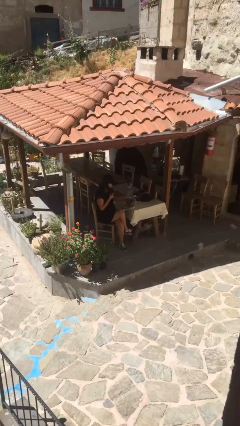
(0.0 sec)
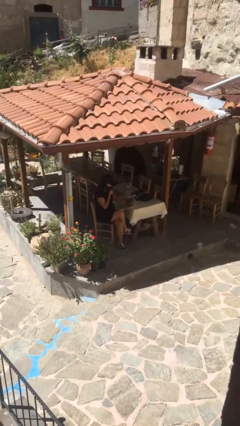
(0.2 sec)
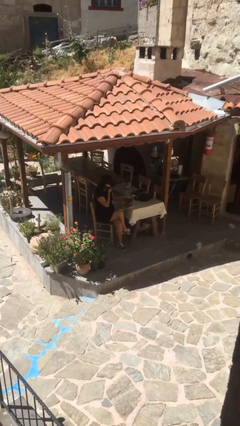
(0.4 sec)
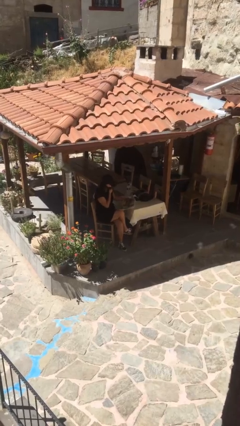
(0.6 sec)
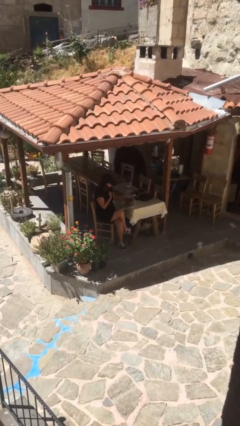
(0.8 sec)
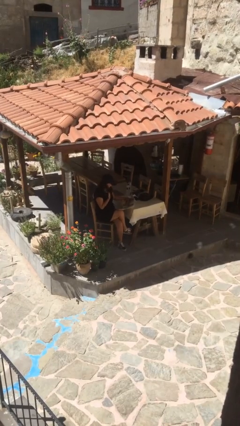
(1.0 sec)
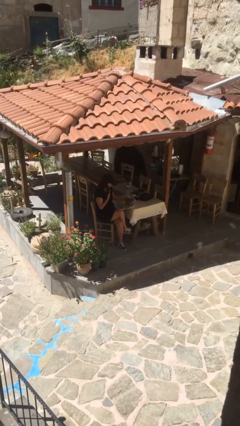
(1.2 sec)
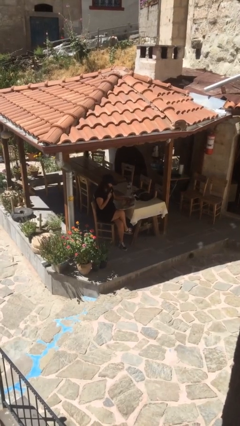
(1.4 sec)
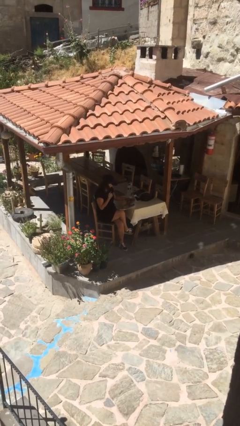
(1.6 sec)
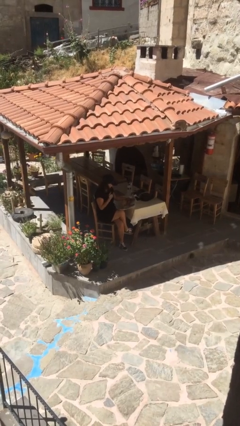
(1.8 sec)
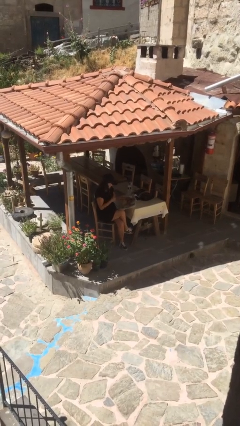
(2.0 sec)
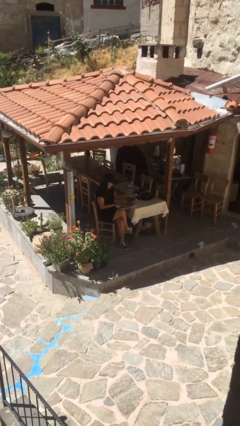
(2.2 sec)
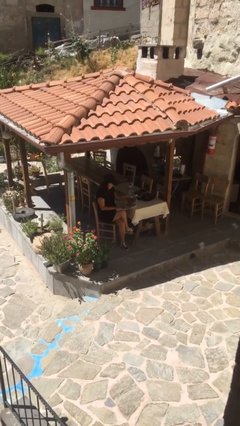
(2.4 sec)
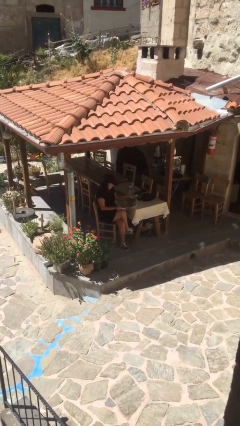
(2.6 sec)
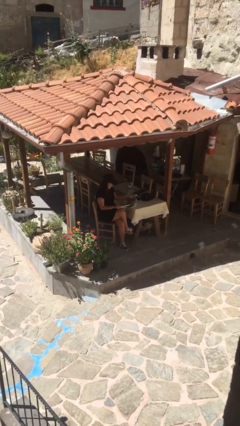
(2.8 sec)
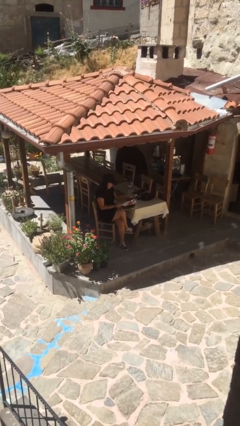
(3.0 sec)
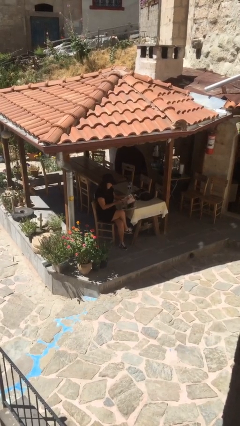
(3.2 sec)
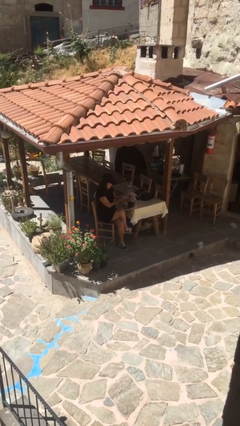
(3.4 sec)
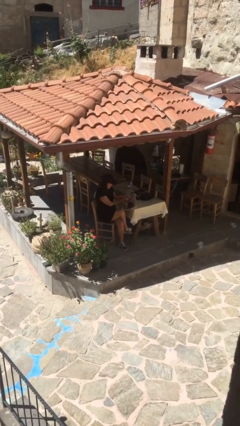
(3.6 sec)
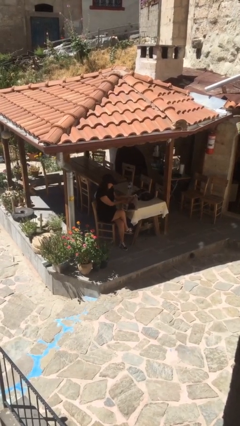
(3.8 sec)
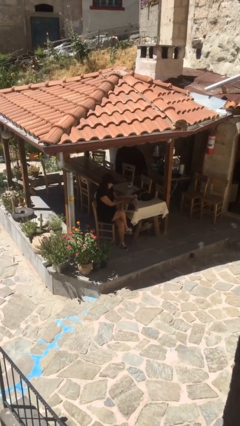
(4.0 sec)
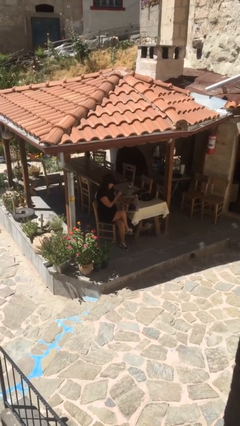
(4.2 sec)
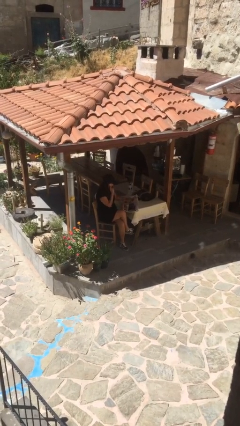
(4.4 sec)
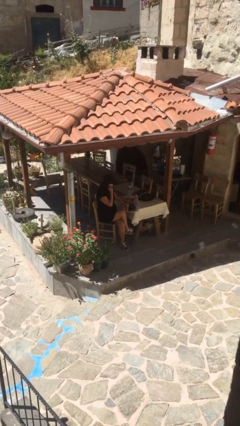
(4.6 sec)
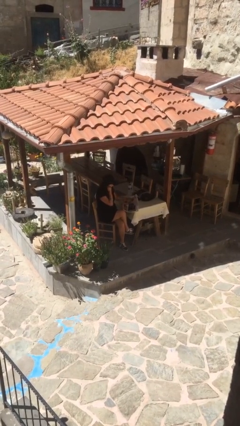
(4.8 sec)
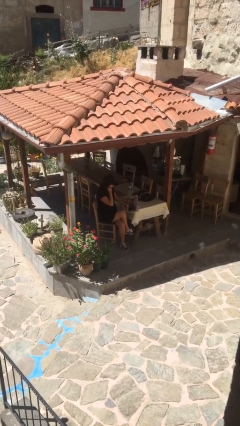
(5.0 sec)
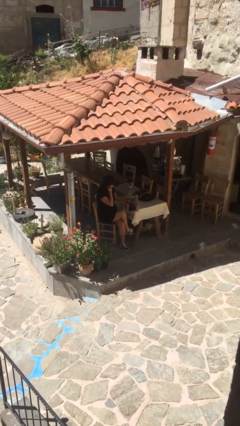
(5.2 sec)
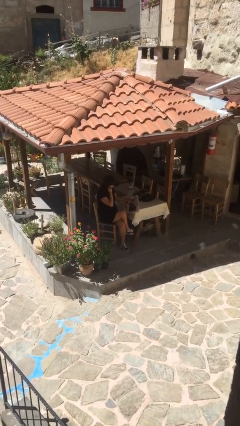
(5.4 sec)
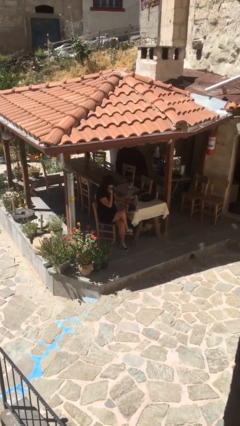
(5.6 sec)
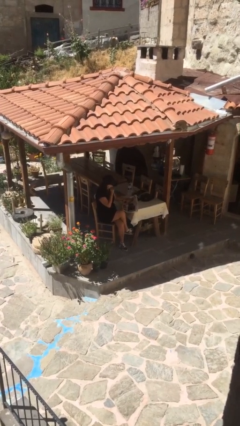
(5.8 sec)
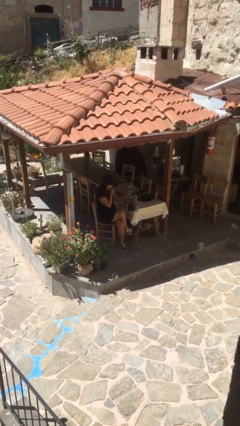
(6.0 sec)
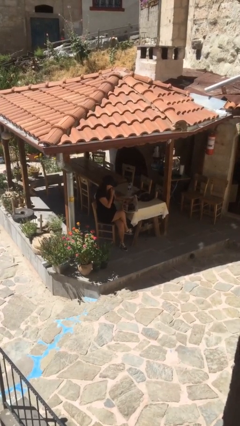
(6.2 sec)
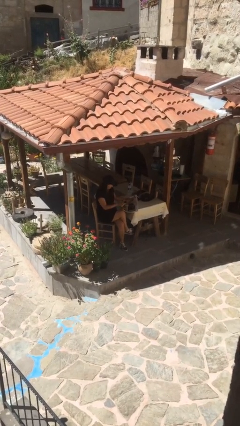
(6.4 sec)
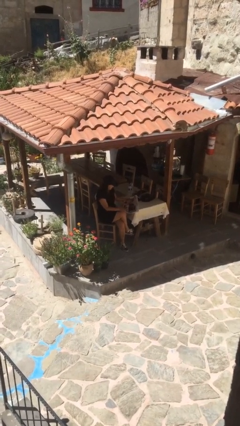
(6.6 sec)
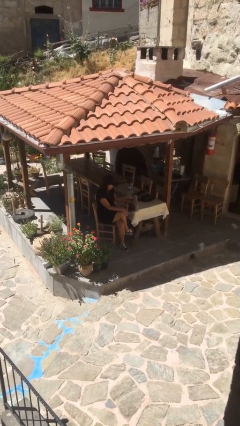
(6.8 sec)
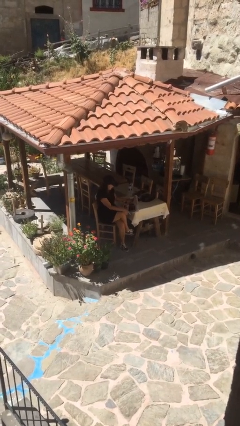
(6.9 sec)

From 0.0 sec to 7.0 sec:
person reads document

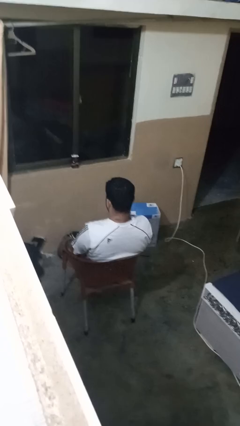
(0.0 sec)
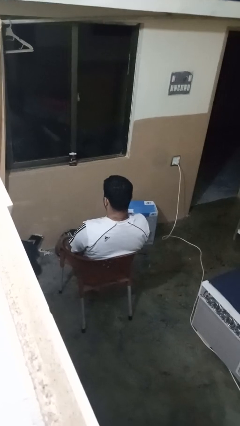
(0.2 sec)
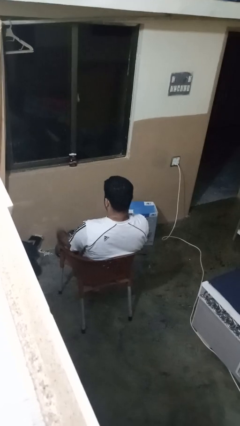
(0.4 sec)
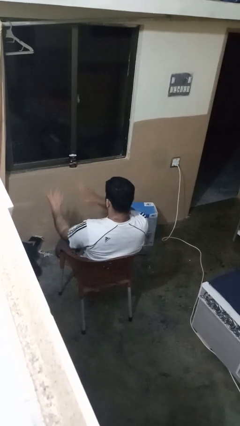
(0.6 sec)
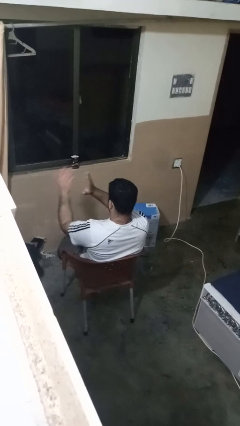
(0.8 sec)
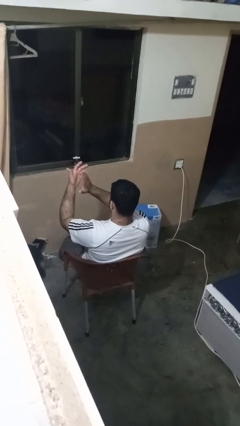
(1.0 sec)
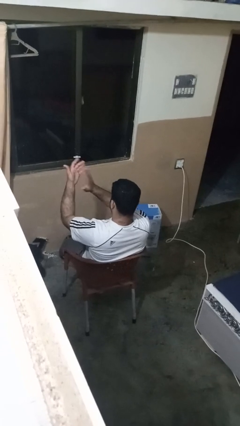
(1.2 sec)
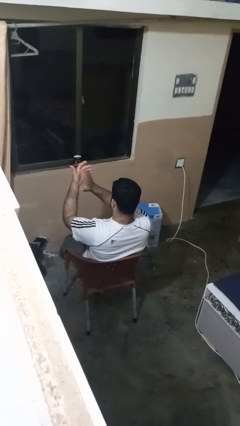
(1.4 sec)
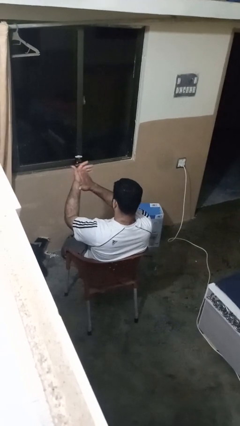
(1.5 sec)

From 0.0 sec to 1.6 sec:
person claps hands

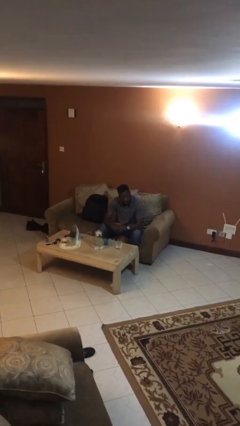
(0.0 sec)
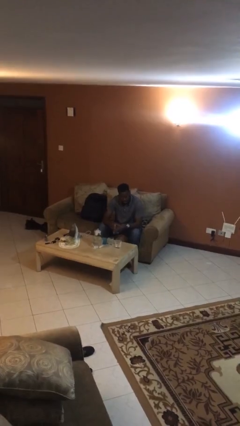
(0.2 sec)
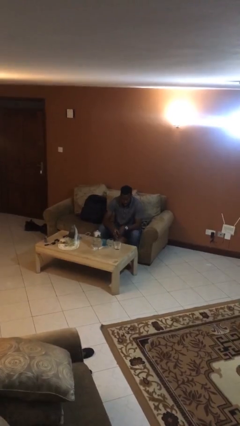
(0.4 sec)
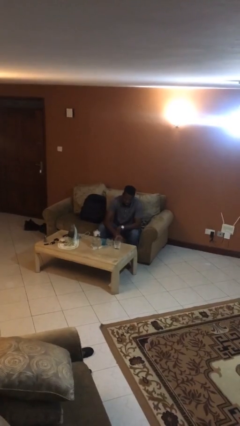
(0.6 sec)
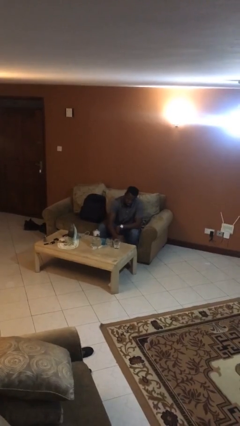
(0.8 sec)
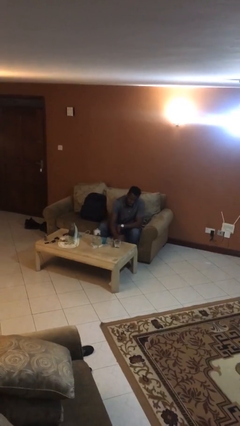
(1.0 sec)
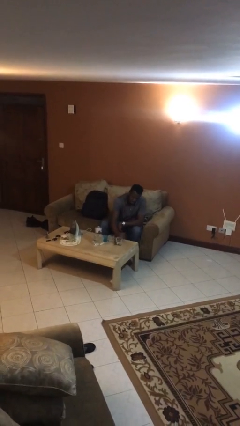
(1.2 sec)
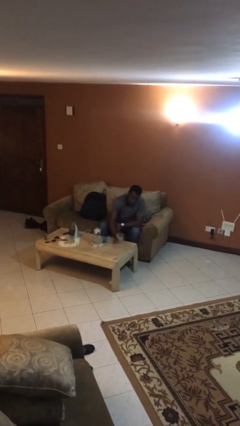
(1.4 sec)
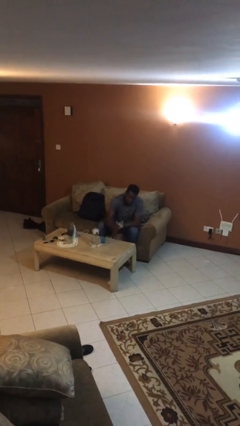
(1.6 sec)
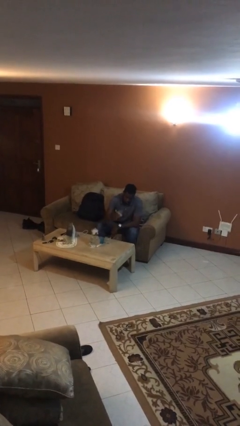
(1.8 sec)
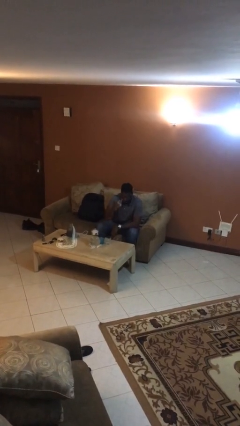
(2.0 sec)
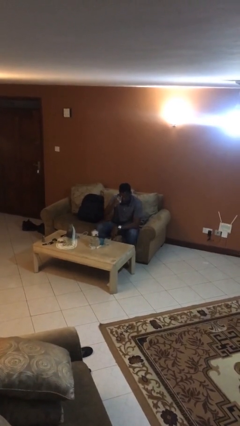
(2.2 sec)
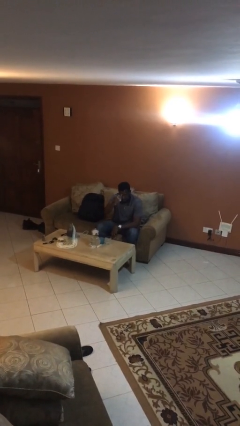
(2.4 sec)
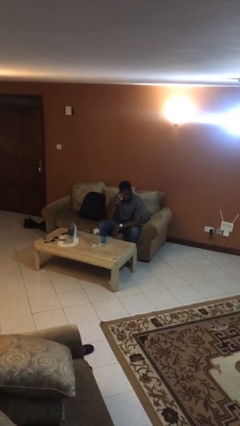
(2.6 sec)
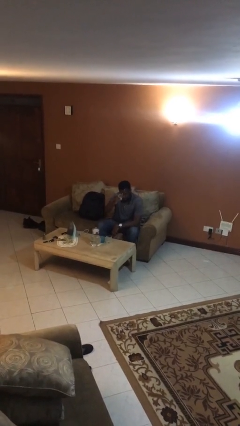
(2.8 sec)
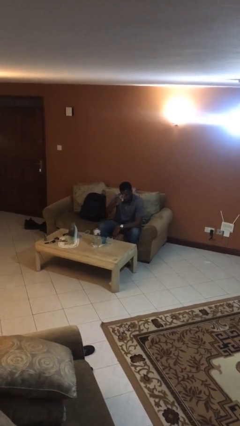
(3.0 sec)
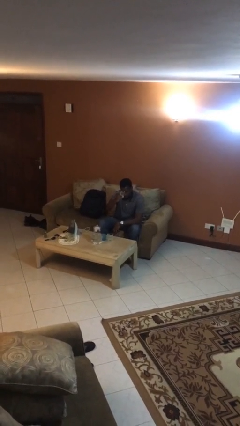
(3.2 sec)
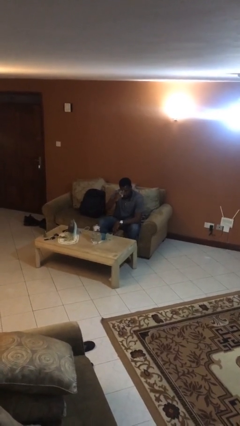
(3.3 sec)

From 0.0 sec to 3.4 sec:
person picks up object from table

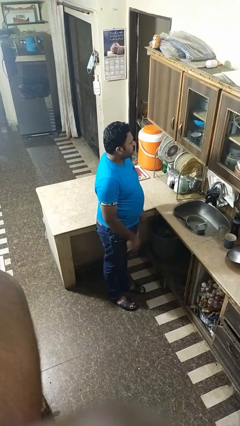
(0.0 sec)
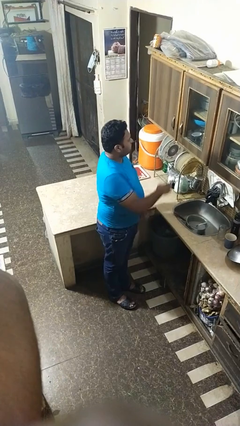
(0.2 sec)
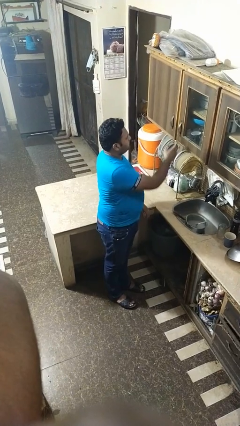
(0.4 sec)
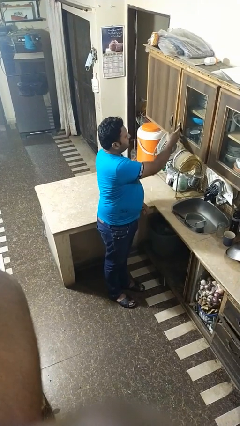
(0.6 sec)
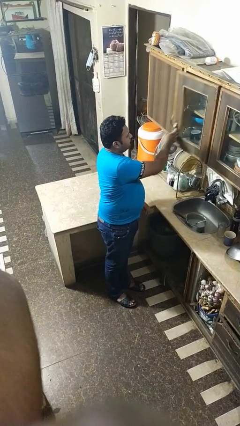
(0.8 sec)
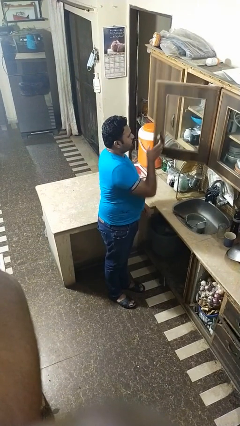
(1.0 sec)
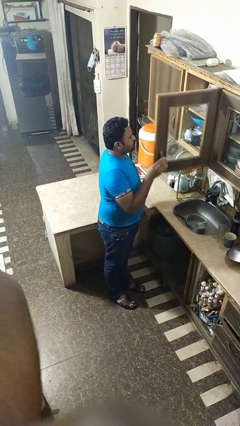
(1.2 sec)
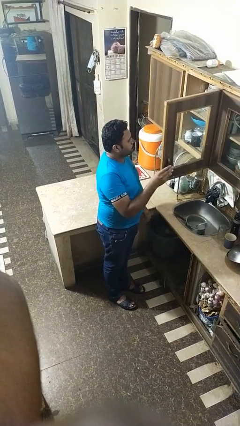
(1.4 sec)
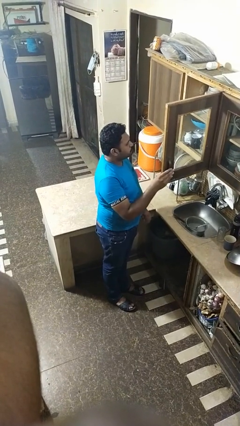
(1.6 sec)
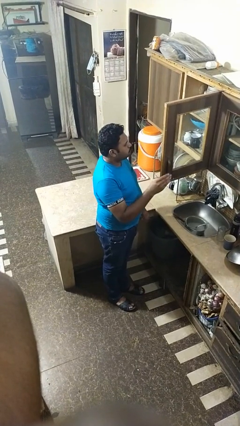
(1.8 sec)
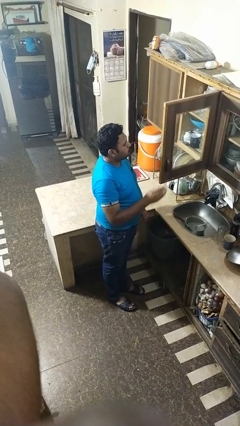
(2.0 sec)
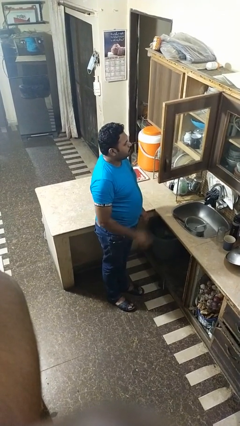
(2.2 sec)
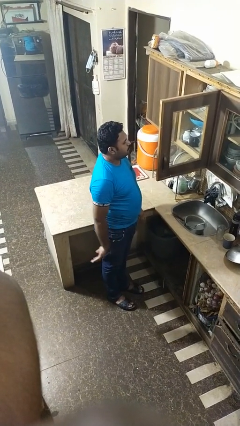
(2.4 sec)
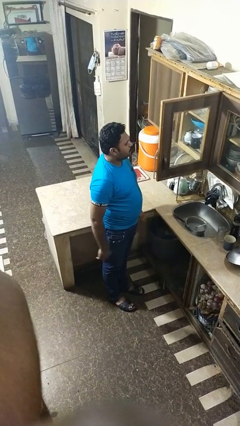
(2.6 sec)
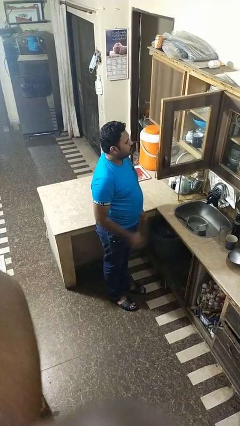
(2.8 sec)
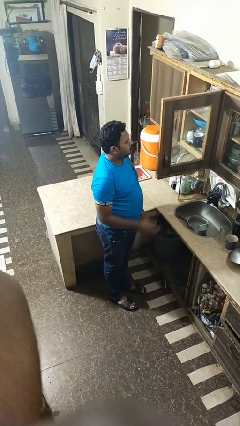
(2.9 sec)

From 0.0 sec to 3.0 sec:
person opens cabinet

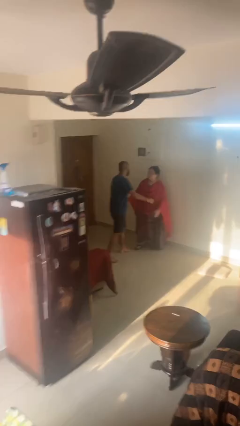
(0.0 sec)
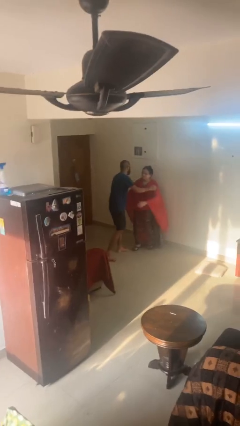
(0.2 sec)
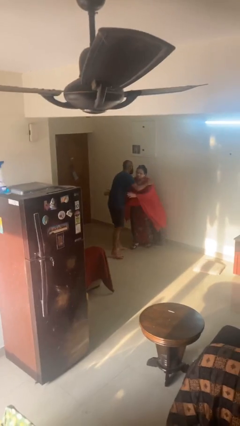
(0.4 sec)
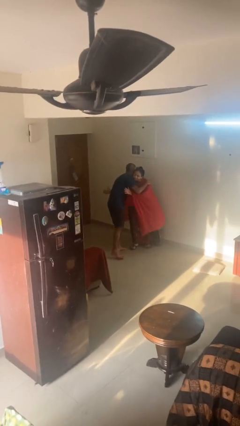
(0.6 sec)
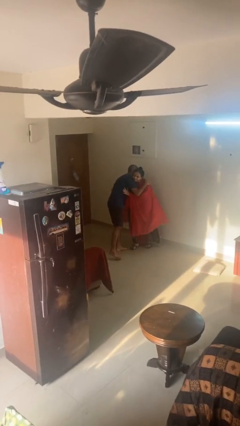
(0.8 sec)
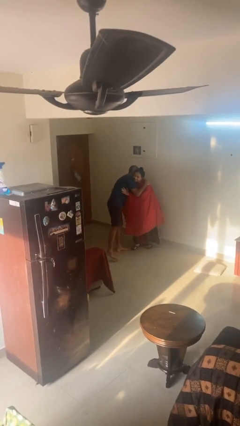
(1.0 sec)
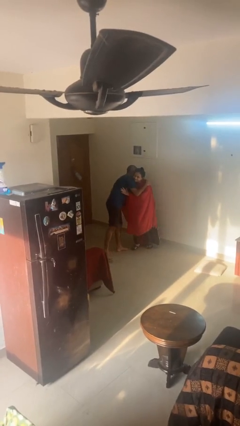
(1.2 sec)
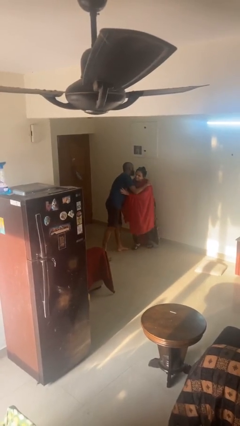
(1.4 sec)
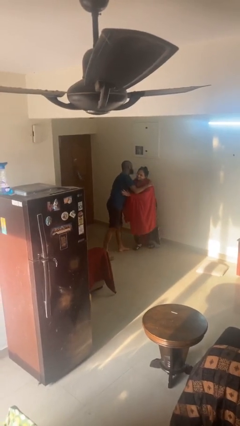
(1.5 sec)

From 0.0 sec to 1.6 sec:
person embraces person

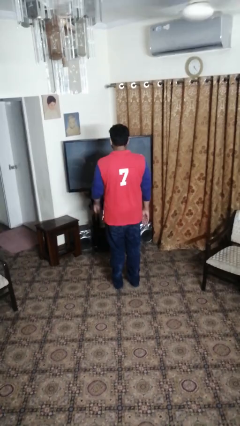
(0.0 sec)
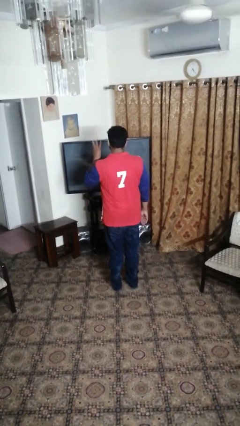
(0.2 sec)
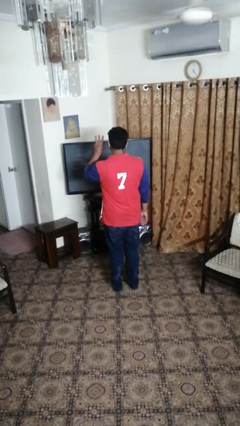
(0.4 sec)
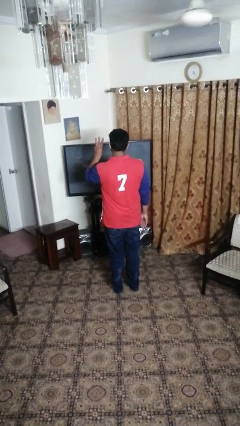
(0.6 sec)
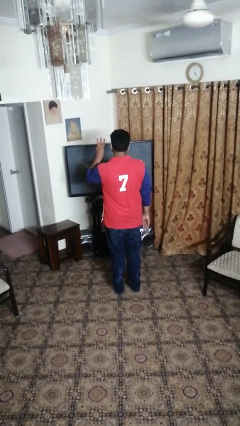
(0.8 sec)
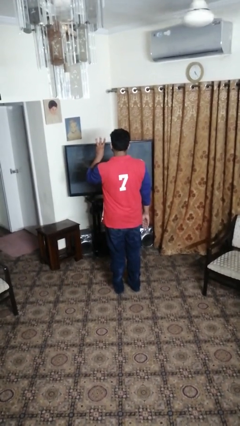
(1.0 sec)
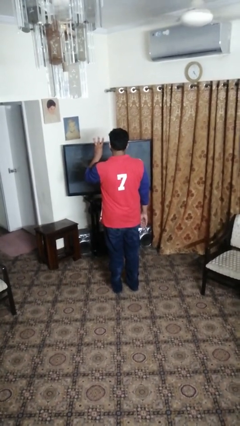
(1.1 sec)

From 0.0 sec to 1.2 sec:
person gestures number three
